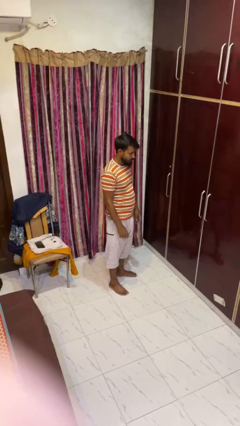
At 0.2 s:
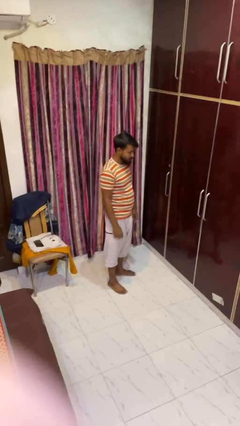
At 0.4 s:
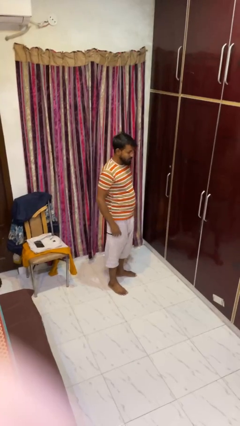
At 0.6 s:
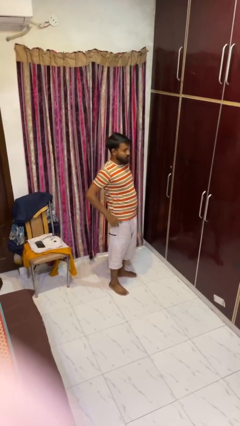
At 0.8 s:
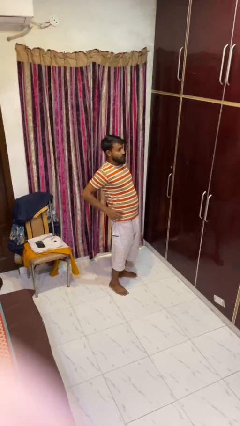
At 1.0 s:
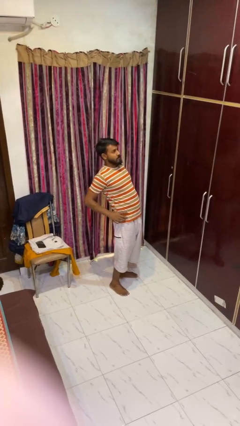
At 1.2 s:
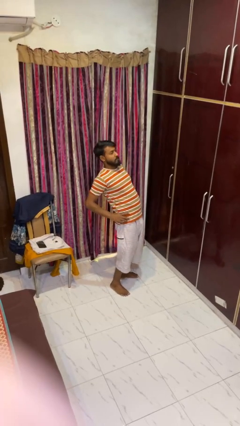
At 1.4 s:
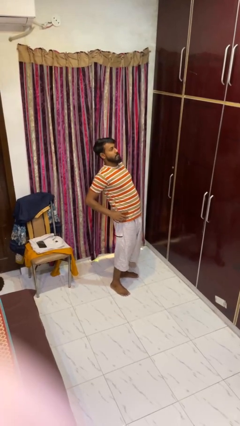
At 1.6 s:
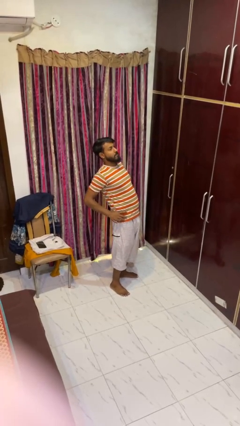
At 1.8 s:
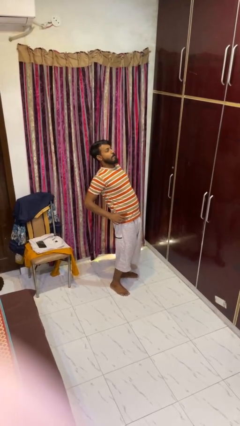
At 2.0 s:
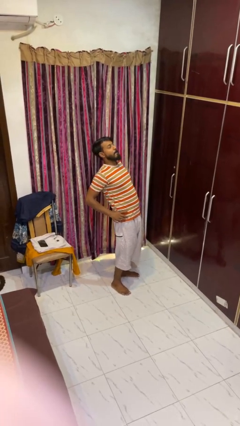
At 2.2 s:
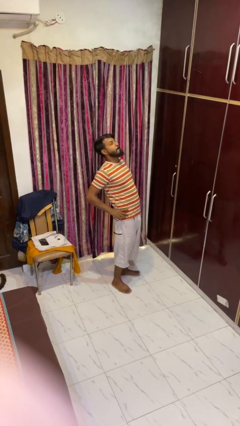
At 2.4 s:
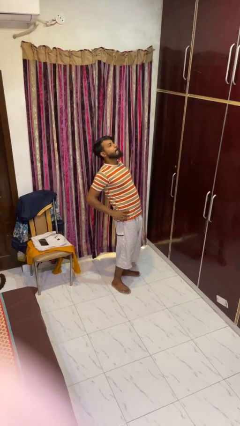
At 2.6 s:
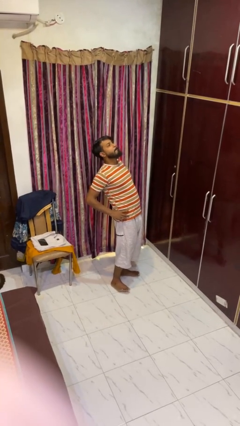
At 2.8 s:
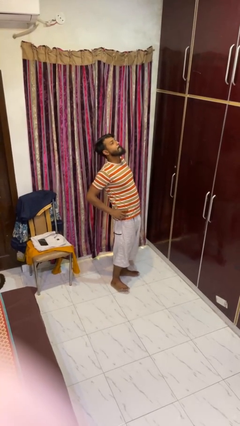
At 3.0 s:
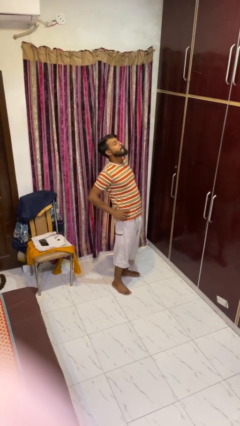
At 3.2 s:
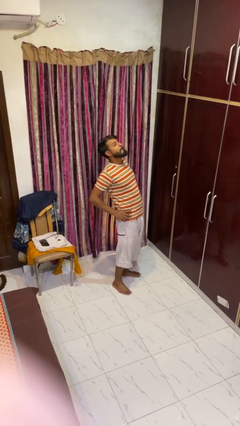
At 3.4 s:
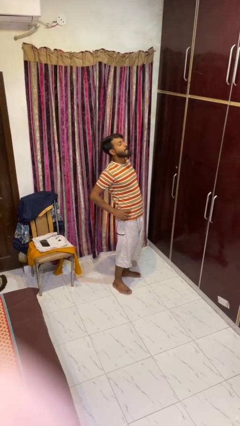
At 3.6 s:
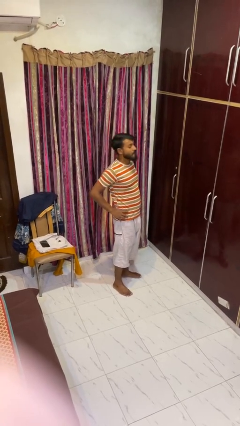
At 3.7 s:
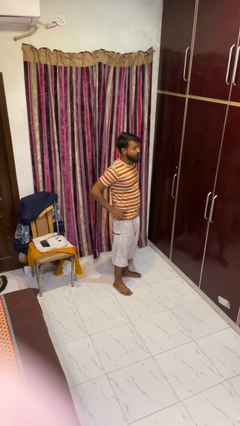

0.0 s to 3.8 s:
person stretches back

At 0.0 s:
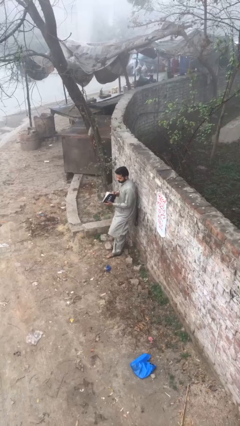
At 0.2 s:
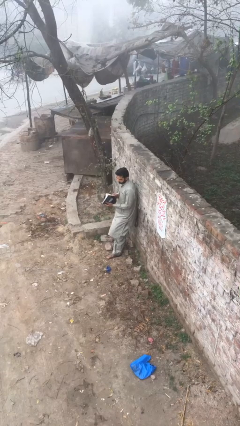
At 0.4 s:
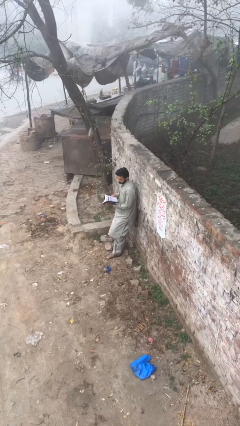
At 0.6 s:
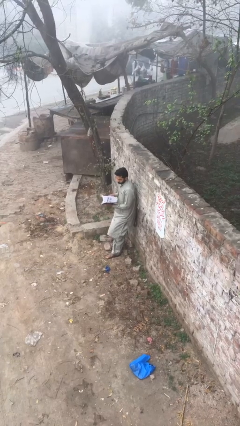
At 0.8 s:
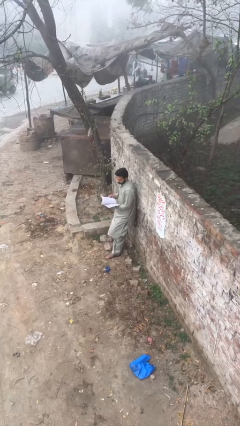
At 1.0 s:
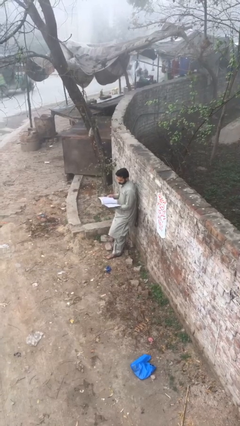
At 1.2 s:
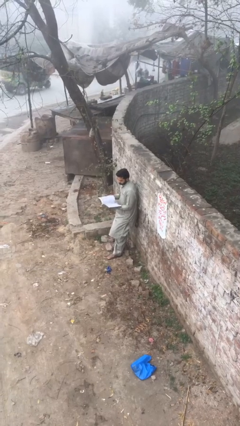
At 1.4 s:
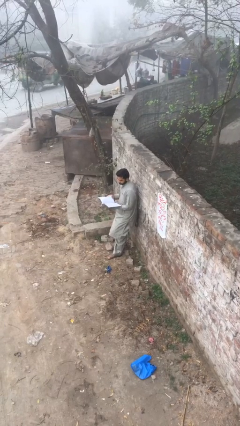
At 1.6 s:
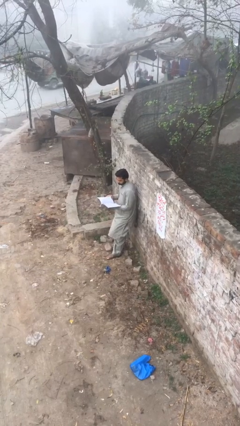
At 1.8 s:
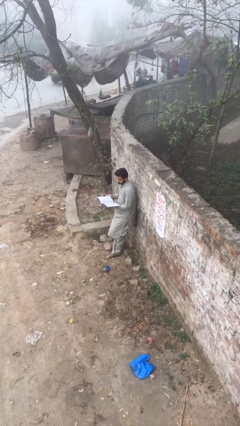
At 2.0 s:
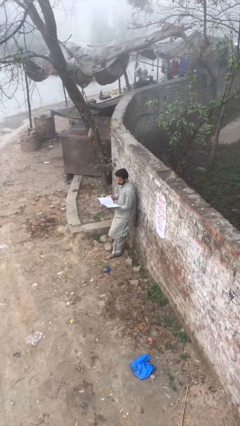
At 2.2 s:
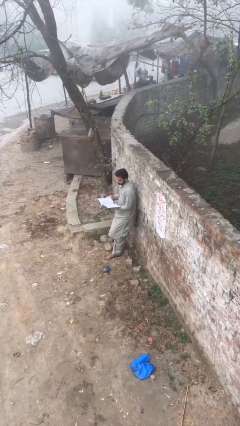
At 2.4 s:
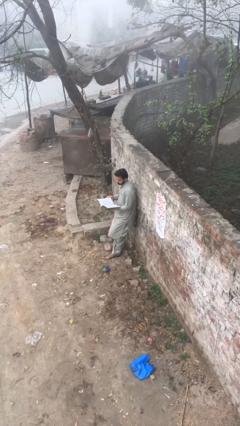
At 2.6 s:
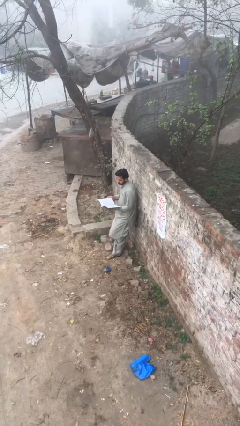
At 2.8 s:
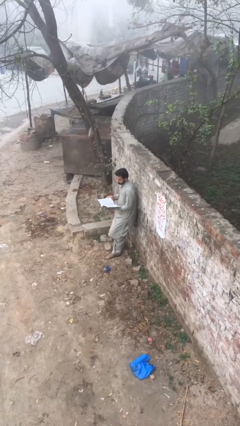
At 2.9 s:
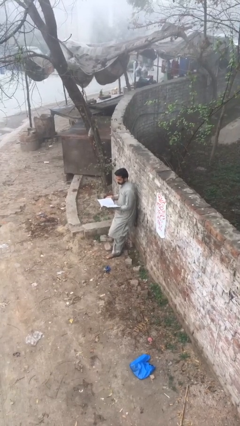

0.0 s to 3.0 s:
person reads document

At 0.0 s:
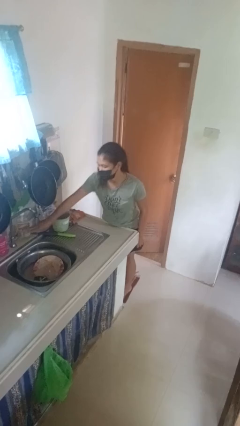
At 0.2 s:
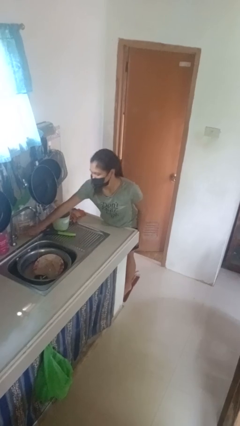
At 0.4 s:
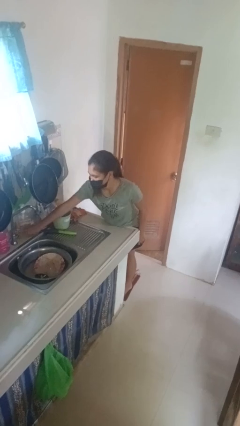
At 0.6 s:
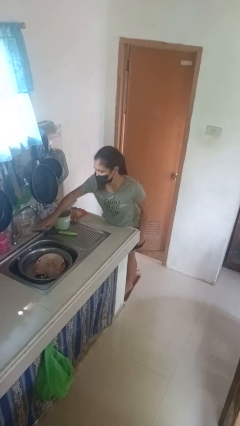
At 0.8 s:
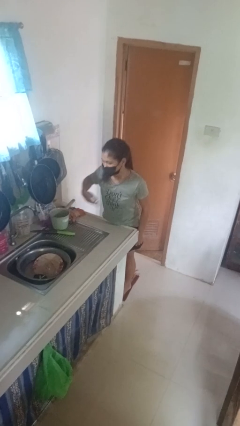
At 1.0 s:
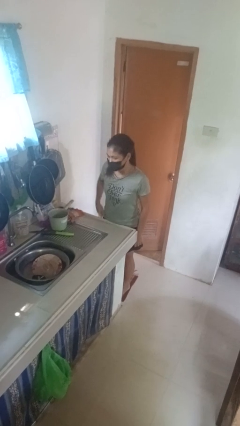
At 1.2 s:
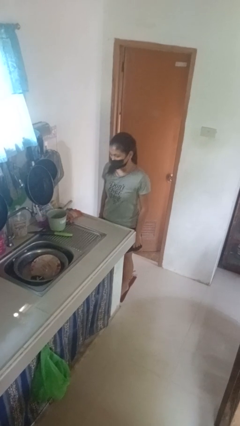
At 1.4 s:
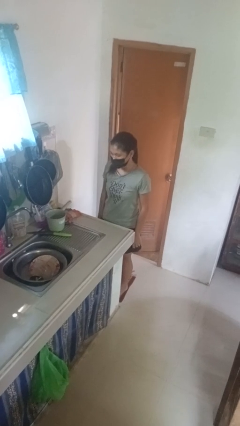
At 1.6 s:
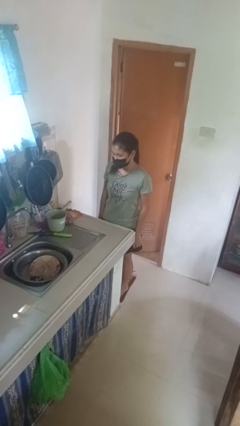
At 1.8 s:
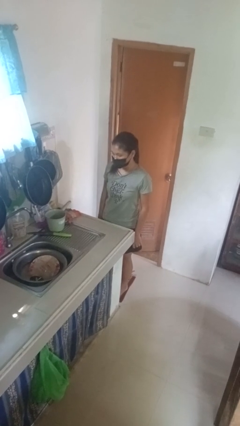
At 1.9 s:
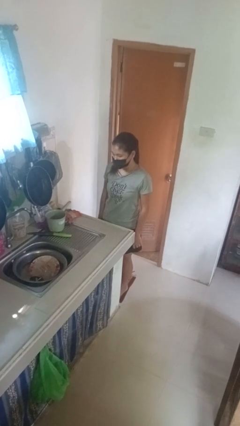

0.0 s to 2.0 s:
person turns off faucet

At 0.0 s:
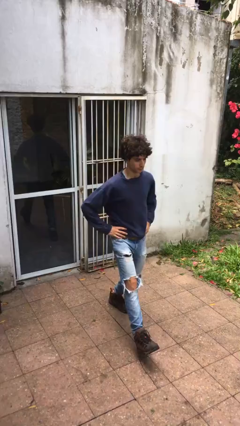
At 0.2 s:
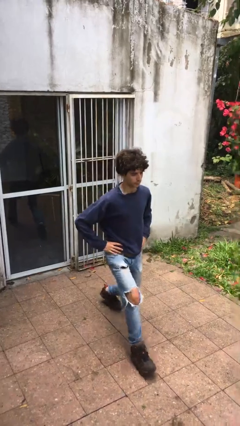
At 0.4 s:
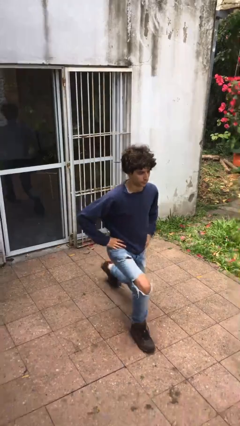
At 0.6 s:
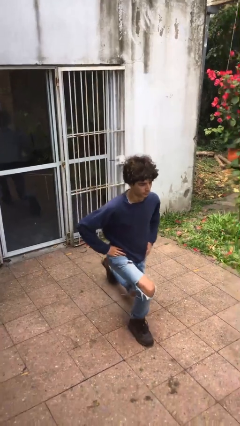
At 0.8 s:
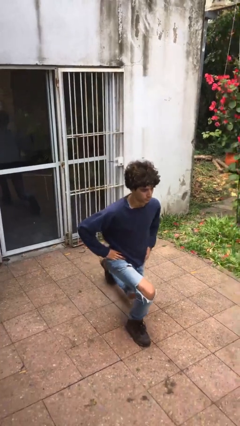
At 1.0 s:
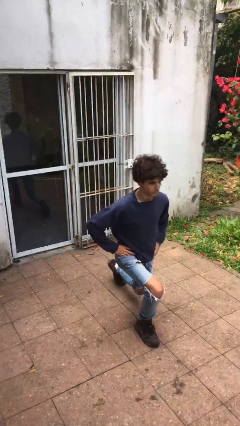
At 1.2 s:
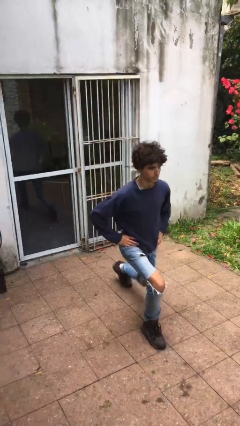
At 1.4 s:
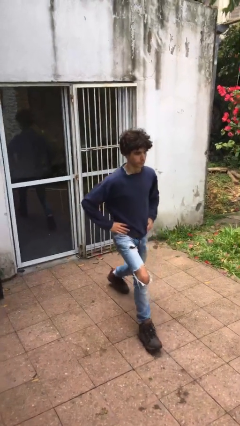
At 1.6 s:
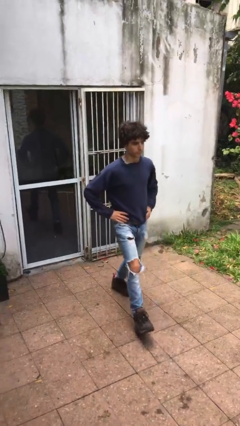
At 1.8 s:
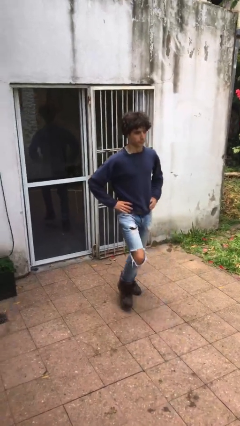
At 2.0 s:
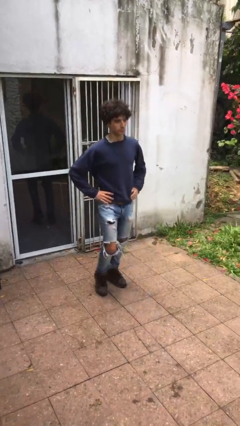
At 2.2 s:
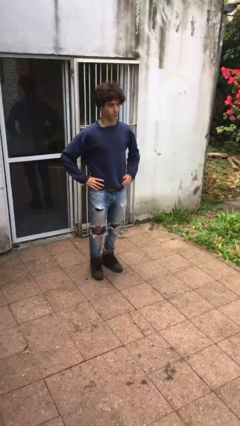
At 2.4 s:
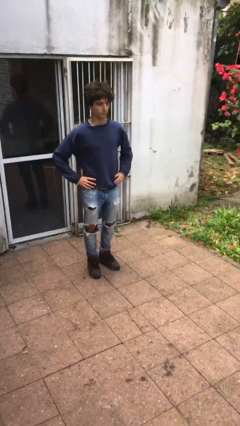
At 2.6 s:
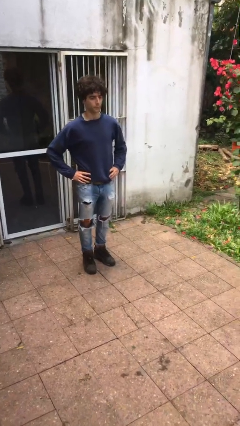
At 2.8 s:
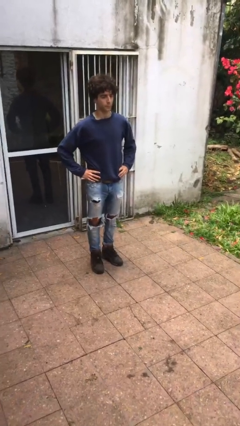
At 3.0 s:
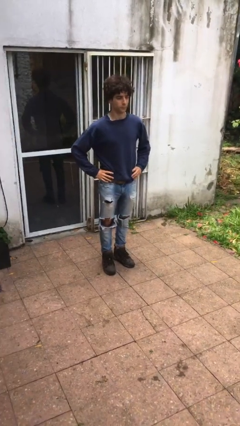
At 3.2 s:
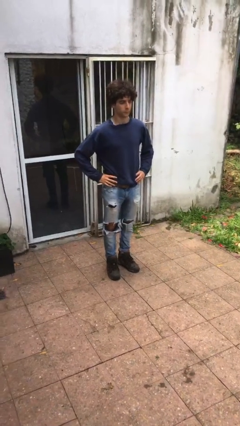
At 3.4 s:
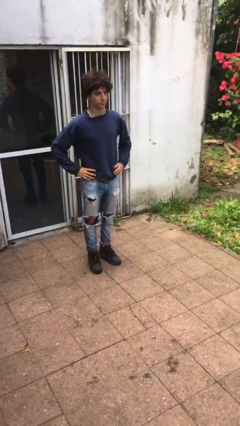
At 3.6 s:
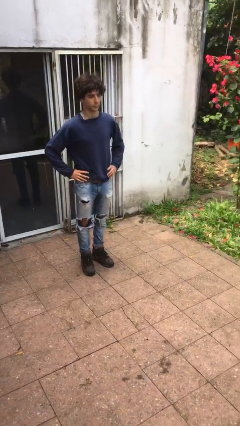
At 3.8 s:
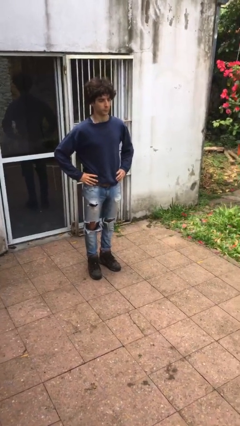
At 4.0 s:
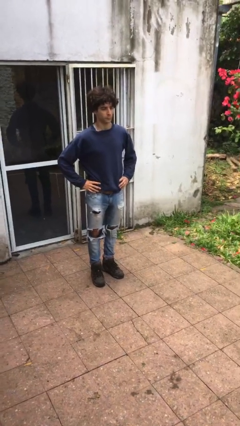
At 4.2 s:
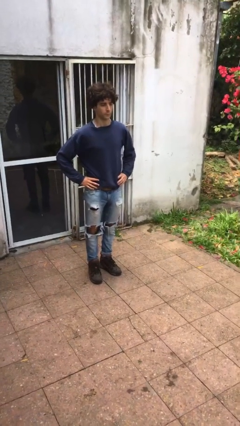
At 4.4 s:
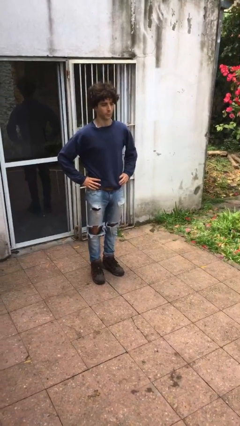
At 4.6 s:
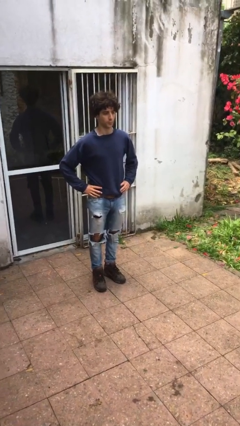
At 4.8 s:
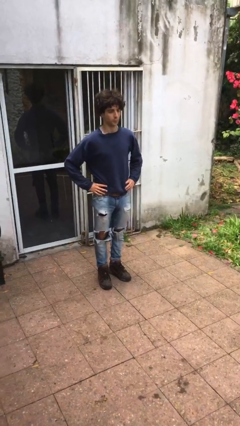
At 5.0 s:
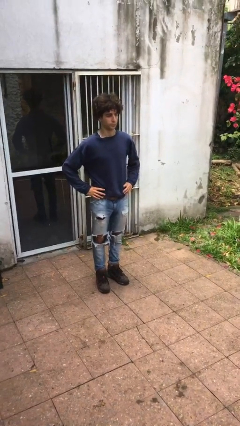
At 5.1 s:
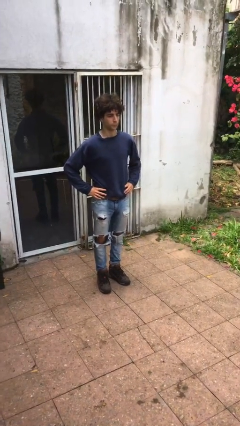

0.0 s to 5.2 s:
person exercises with lunges

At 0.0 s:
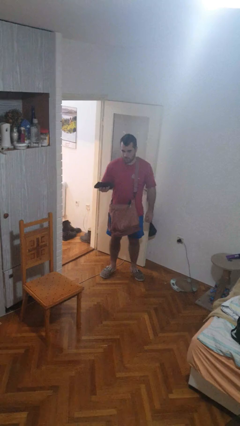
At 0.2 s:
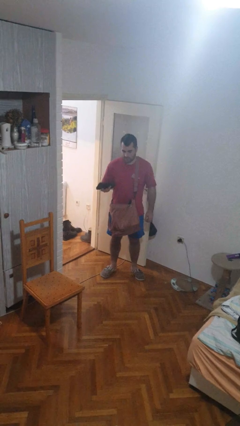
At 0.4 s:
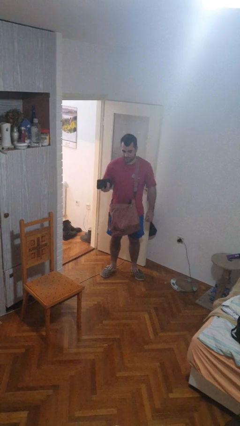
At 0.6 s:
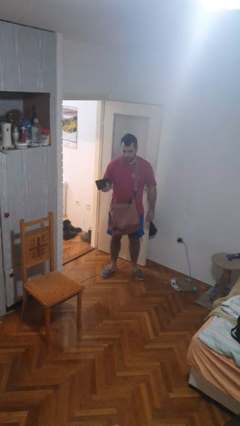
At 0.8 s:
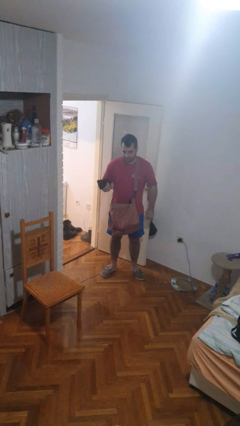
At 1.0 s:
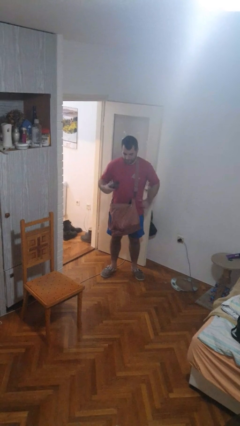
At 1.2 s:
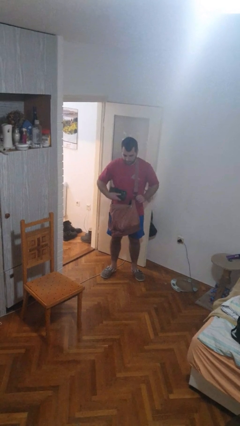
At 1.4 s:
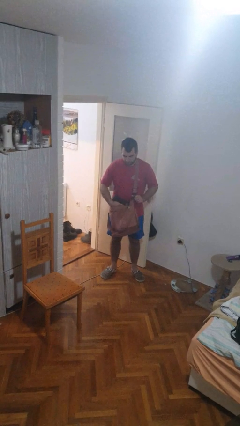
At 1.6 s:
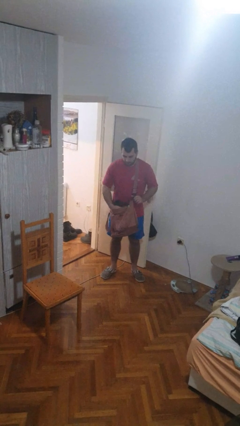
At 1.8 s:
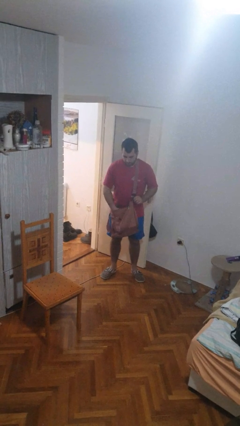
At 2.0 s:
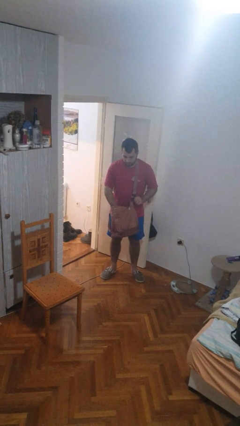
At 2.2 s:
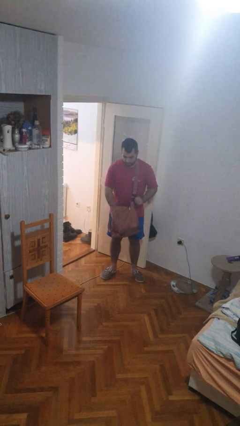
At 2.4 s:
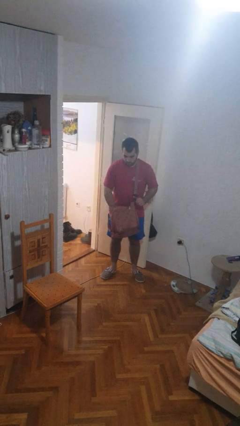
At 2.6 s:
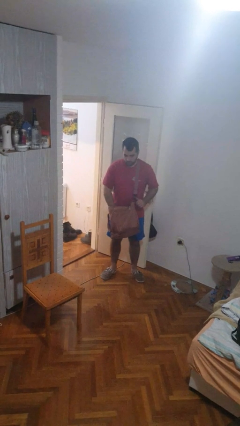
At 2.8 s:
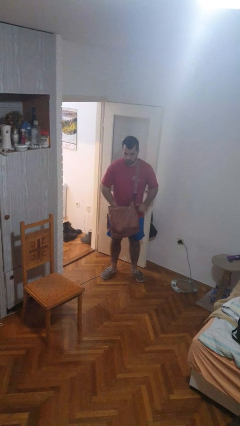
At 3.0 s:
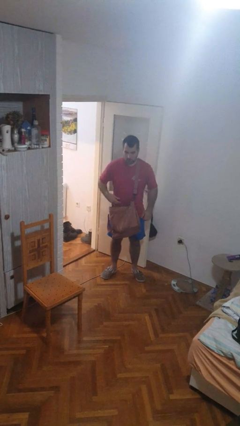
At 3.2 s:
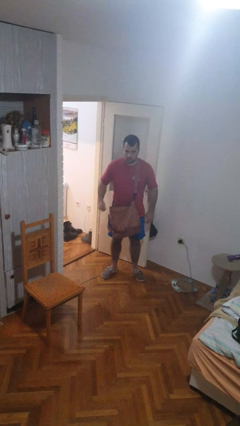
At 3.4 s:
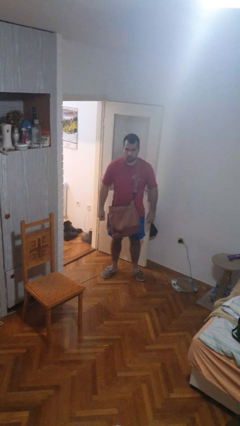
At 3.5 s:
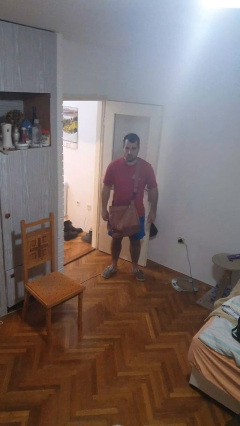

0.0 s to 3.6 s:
person puts object into purse
